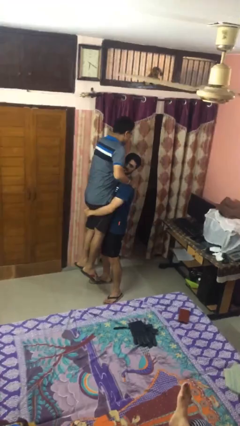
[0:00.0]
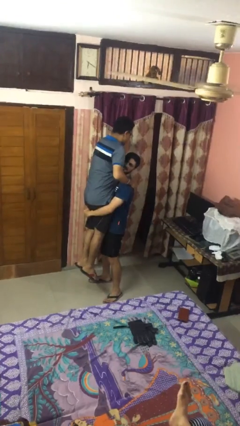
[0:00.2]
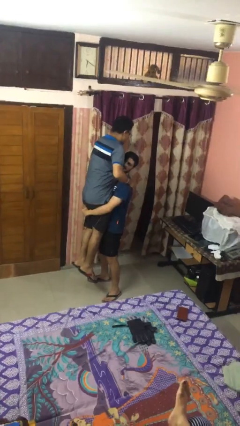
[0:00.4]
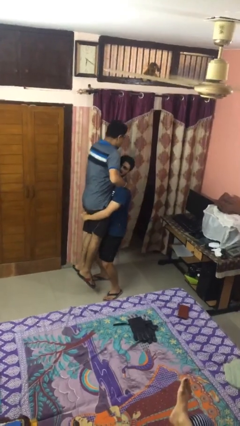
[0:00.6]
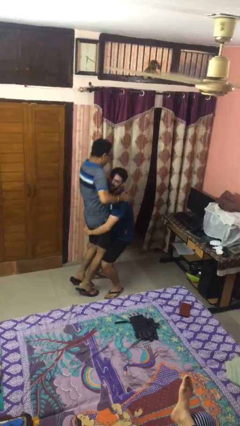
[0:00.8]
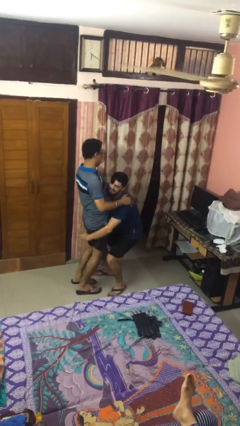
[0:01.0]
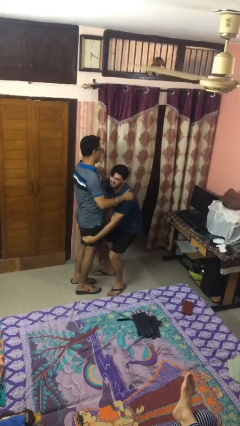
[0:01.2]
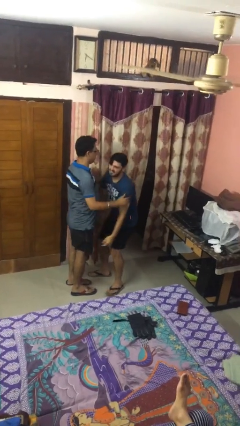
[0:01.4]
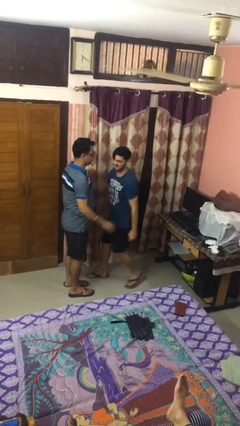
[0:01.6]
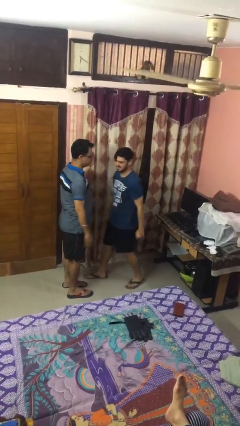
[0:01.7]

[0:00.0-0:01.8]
person puts down person

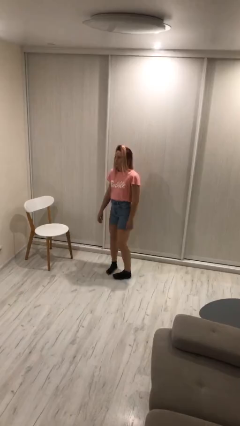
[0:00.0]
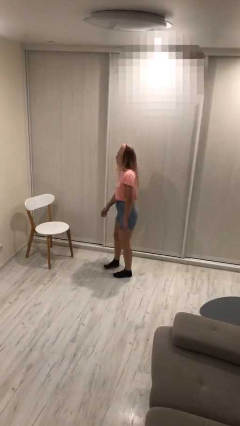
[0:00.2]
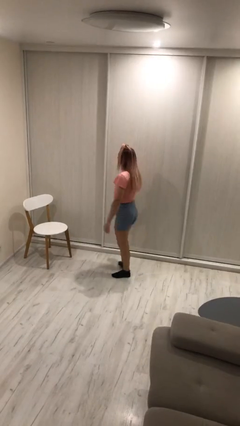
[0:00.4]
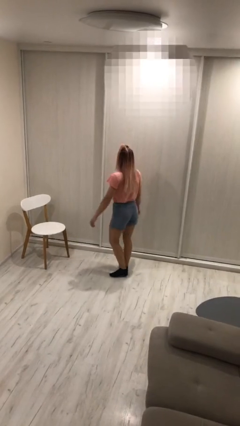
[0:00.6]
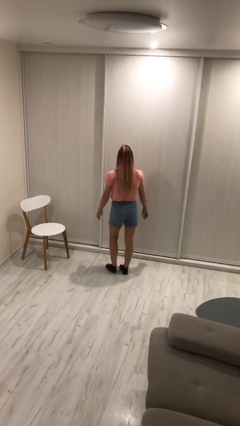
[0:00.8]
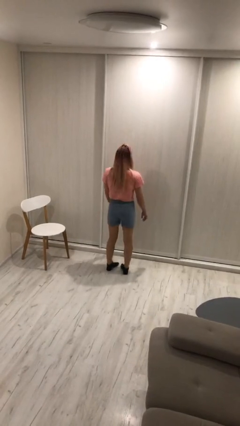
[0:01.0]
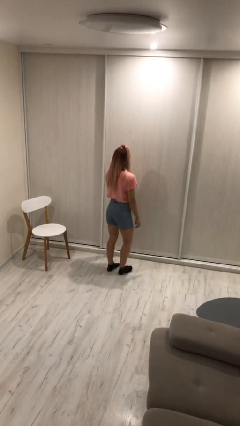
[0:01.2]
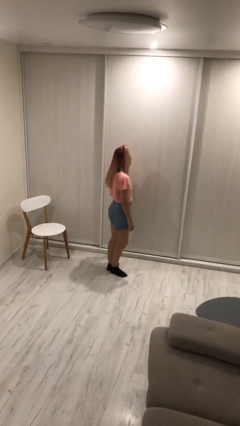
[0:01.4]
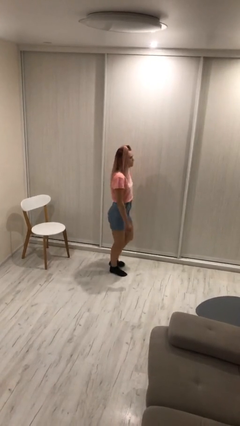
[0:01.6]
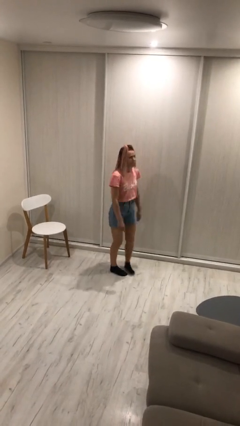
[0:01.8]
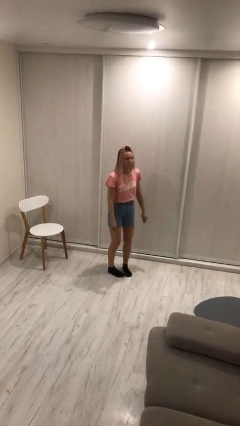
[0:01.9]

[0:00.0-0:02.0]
person twirls

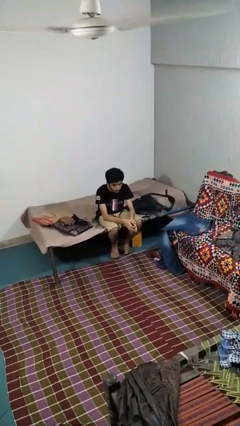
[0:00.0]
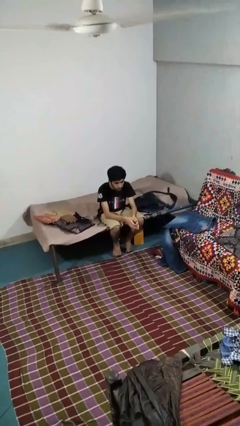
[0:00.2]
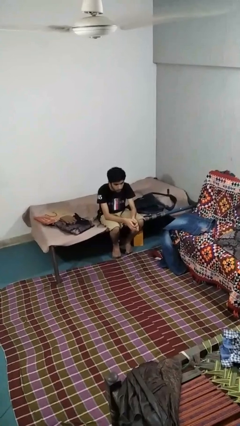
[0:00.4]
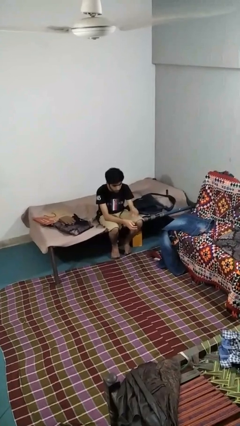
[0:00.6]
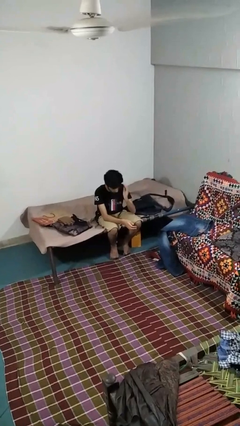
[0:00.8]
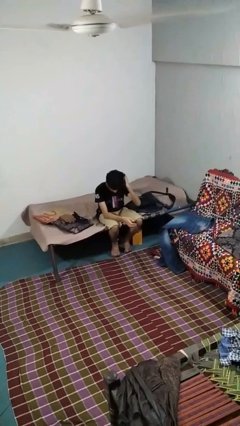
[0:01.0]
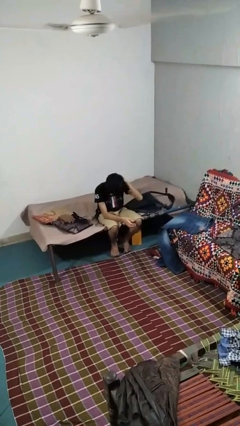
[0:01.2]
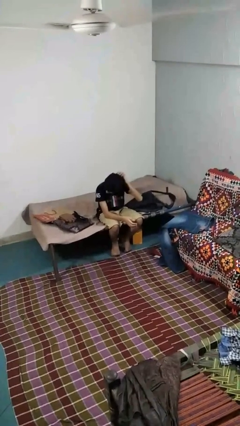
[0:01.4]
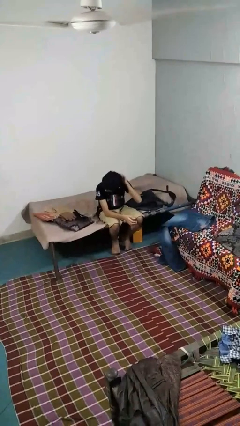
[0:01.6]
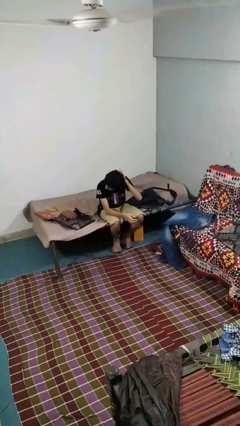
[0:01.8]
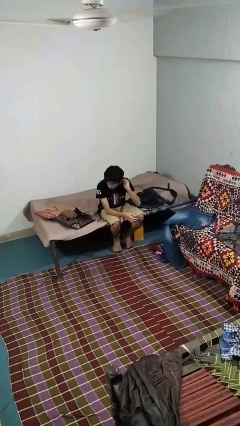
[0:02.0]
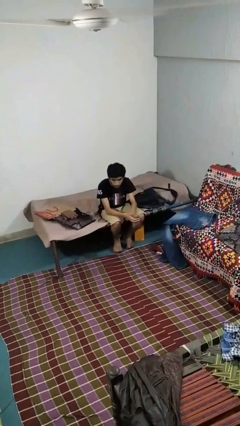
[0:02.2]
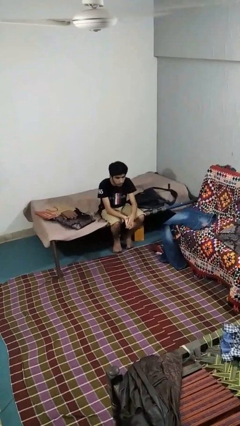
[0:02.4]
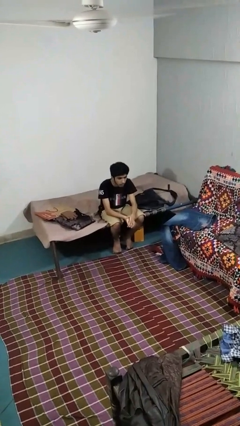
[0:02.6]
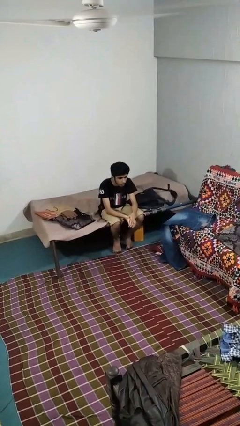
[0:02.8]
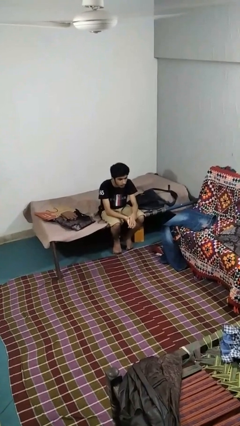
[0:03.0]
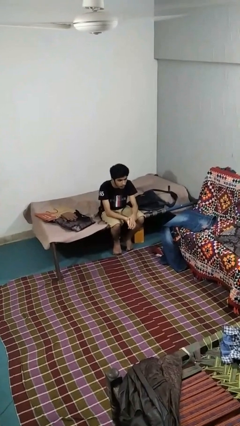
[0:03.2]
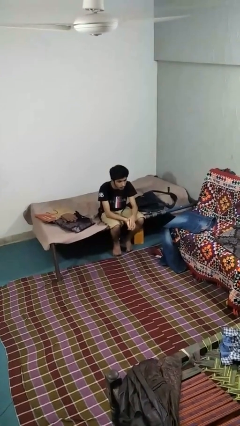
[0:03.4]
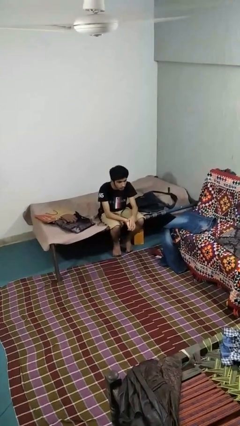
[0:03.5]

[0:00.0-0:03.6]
person strokes hair

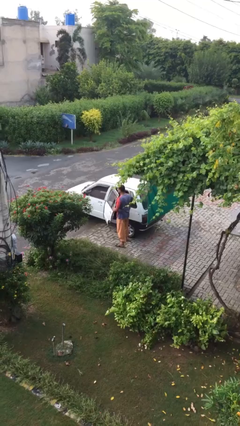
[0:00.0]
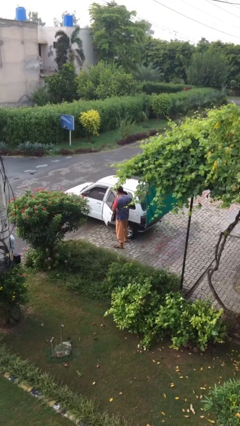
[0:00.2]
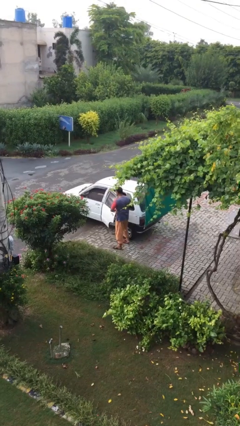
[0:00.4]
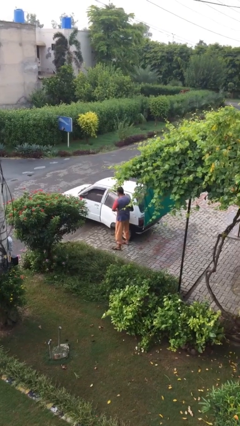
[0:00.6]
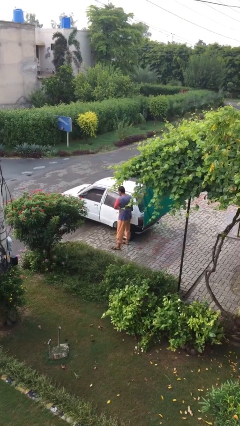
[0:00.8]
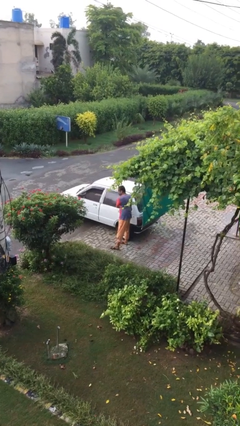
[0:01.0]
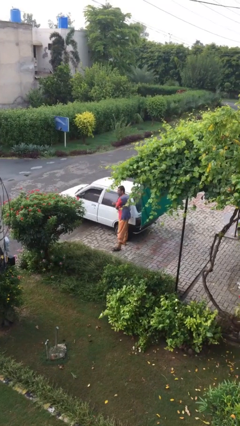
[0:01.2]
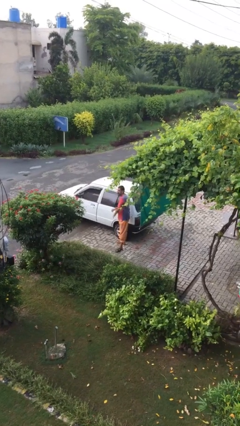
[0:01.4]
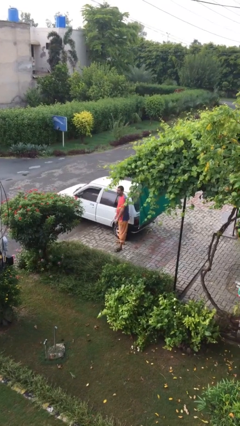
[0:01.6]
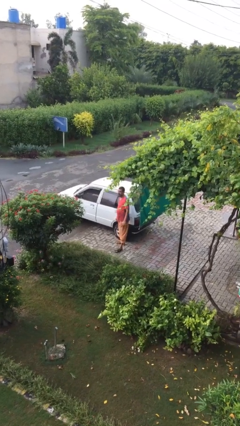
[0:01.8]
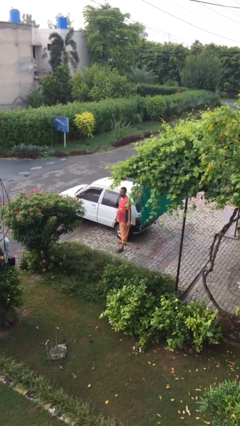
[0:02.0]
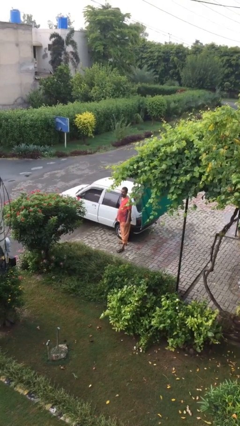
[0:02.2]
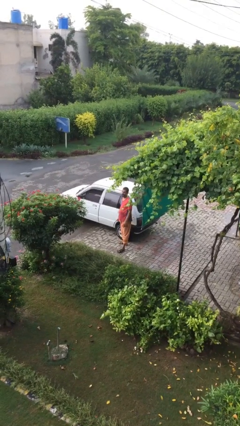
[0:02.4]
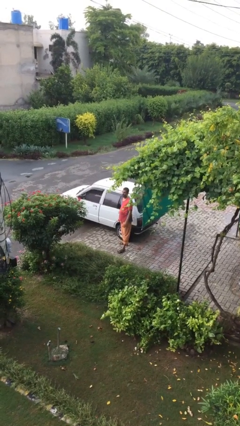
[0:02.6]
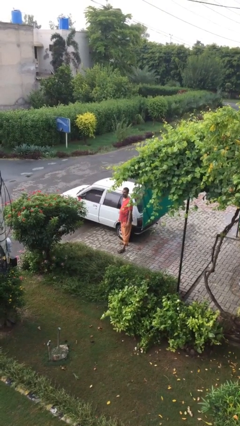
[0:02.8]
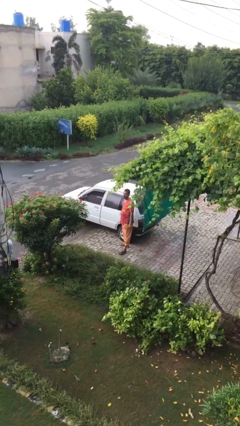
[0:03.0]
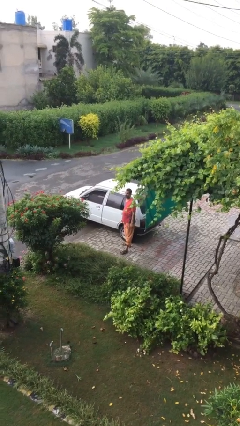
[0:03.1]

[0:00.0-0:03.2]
person closes car door

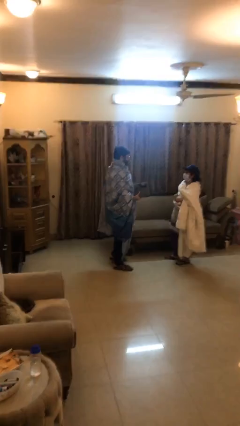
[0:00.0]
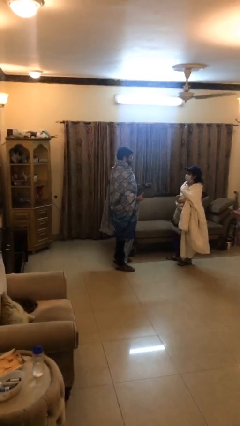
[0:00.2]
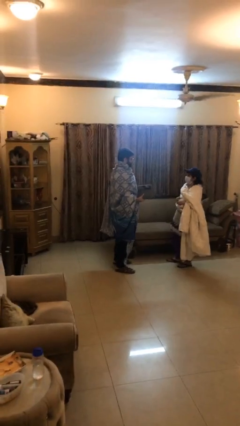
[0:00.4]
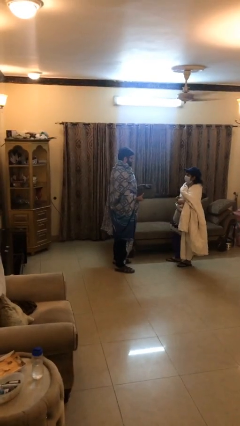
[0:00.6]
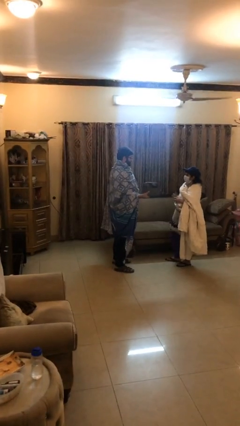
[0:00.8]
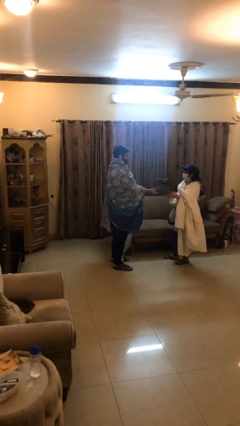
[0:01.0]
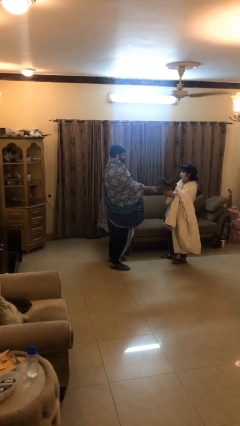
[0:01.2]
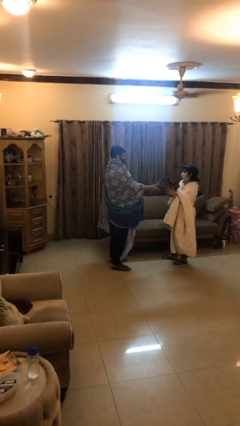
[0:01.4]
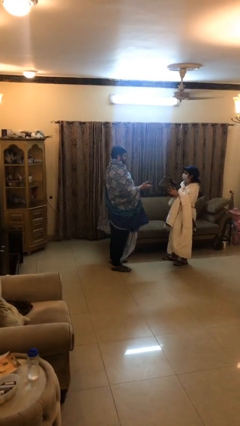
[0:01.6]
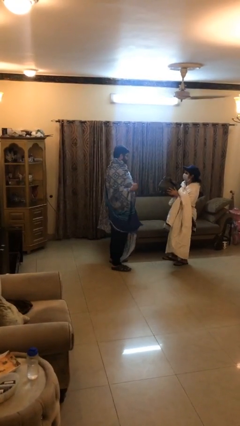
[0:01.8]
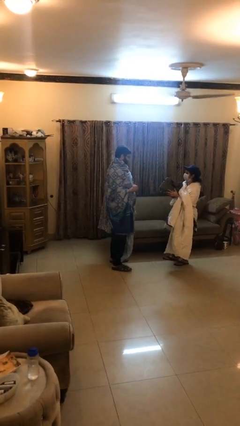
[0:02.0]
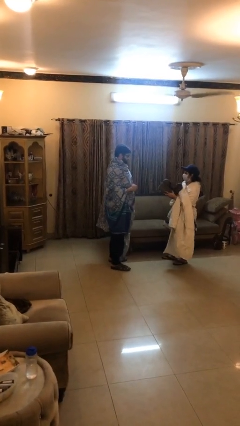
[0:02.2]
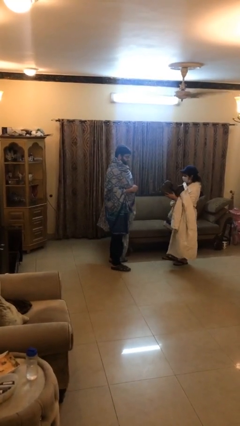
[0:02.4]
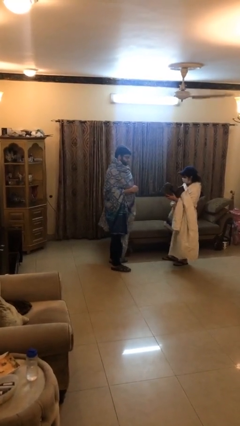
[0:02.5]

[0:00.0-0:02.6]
person transfers object to person

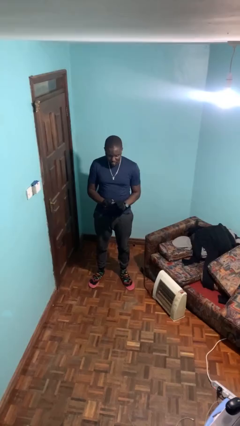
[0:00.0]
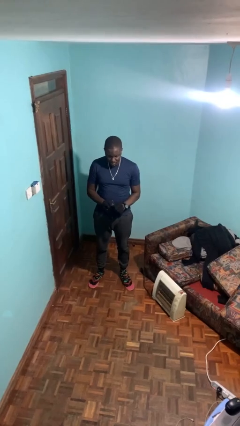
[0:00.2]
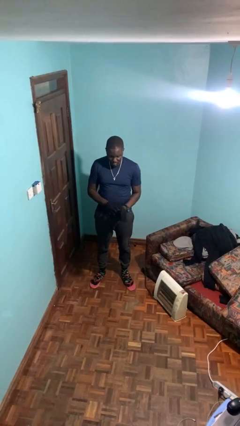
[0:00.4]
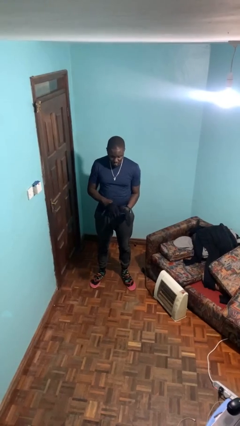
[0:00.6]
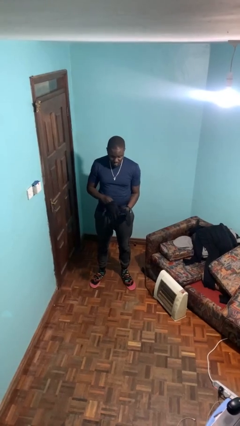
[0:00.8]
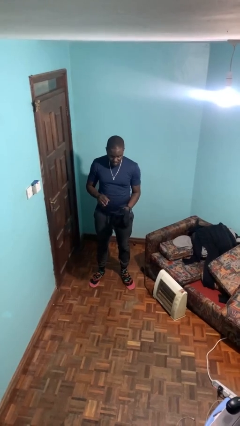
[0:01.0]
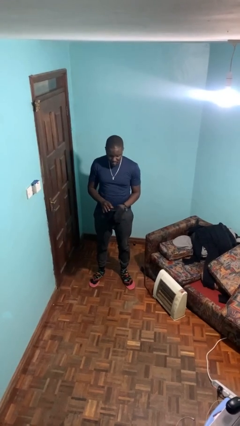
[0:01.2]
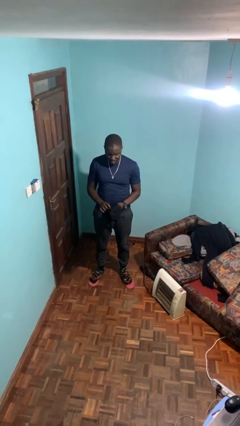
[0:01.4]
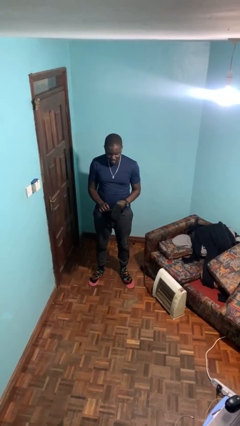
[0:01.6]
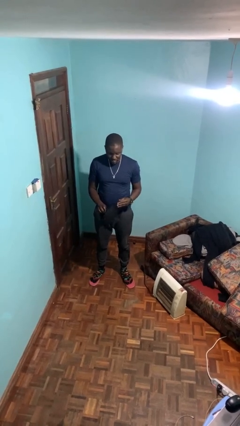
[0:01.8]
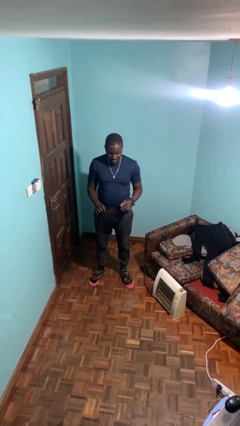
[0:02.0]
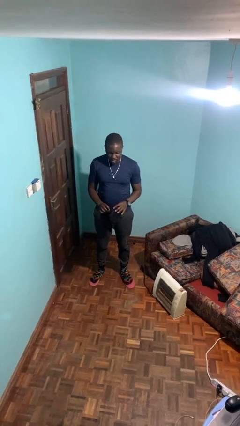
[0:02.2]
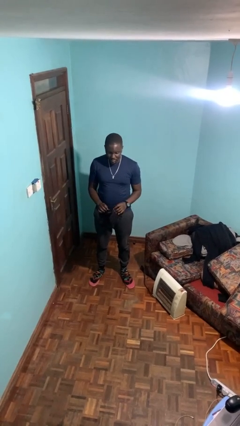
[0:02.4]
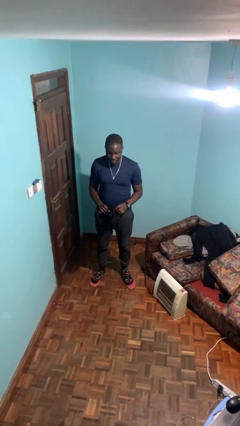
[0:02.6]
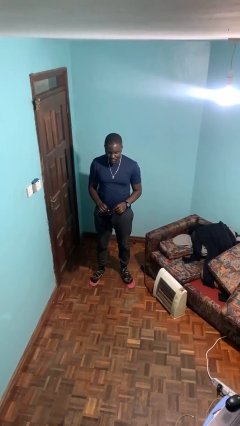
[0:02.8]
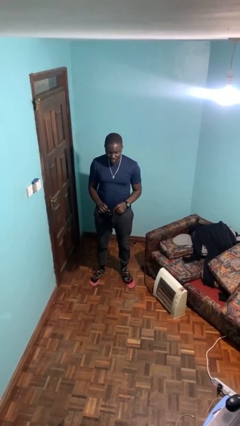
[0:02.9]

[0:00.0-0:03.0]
person takes off gloves

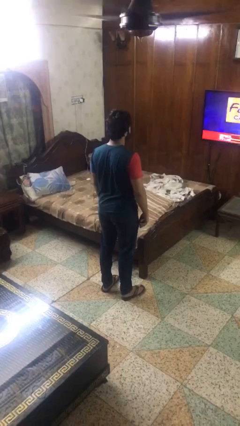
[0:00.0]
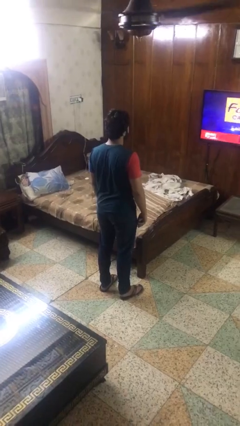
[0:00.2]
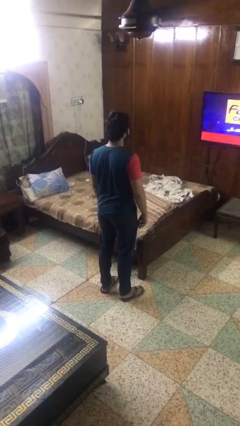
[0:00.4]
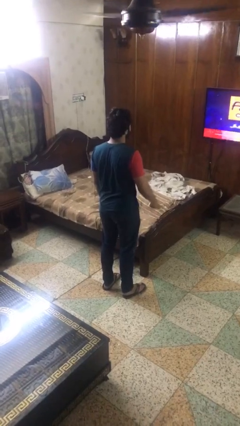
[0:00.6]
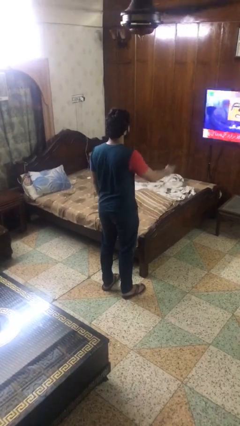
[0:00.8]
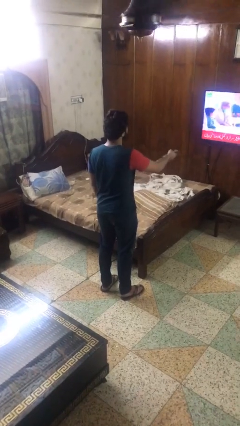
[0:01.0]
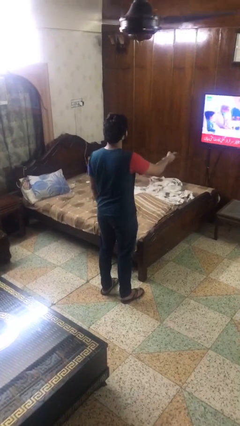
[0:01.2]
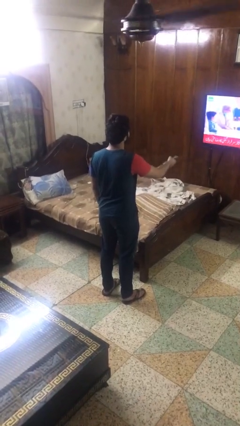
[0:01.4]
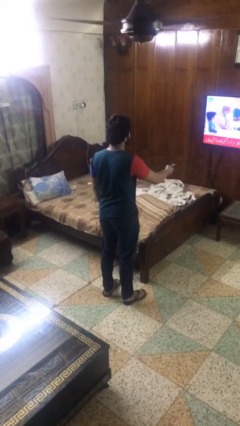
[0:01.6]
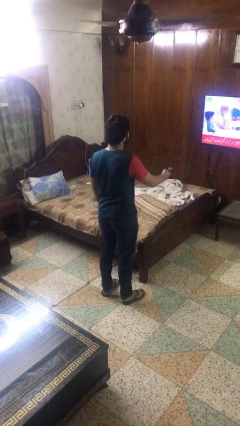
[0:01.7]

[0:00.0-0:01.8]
person uses television remote
